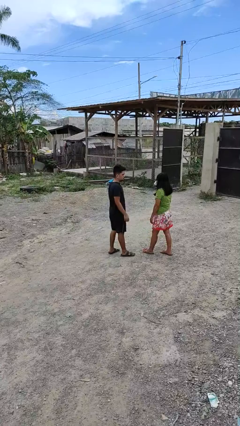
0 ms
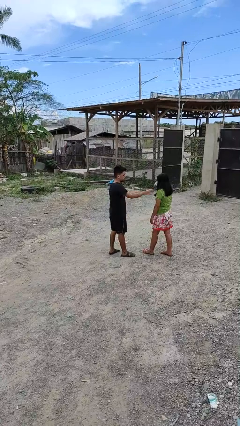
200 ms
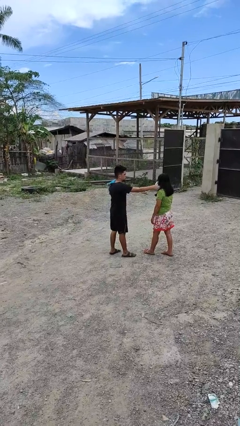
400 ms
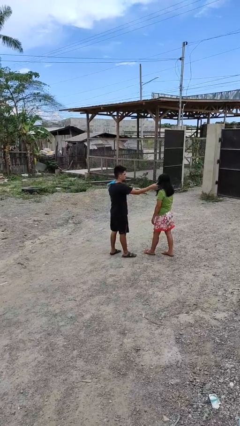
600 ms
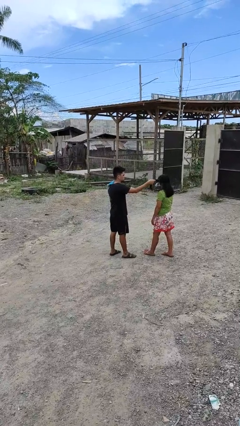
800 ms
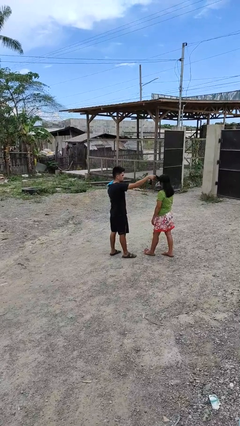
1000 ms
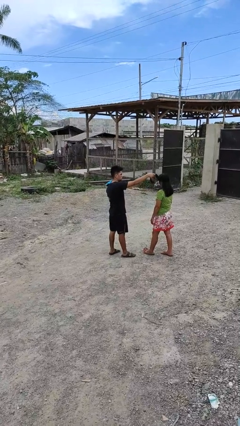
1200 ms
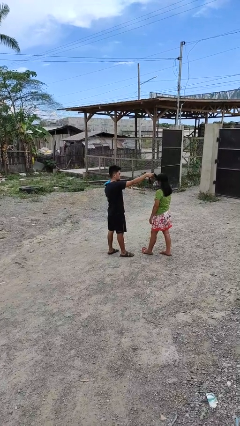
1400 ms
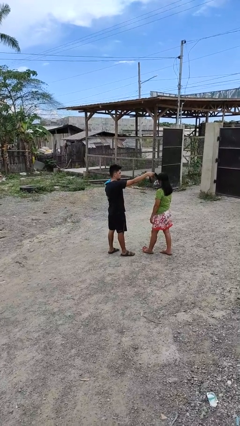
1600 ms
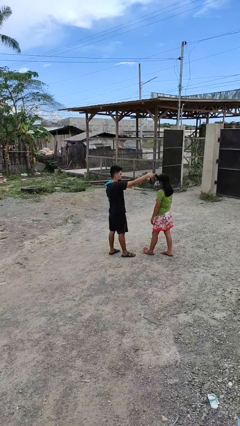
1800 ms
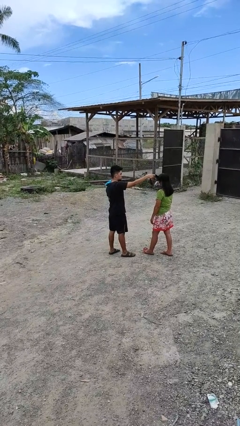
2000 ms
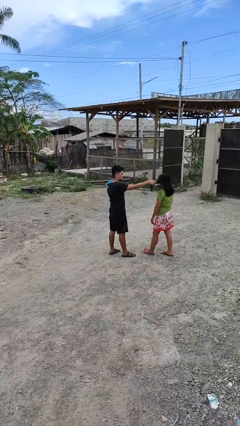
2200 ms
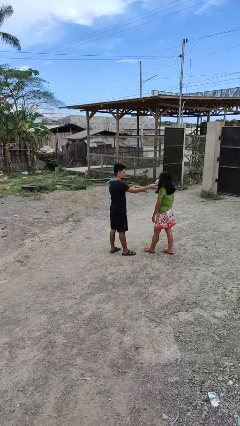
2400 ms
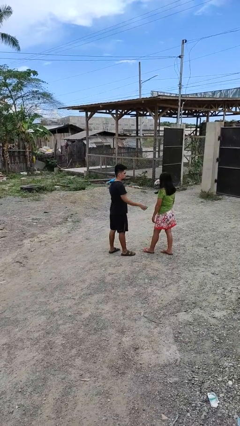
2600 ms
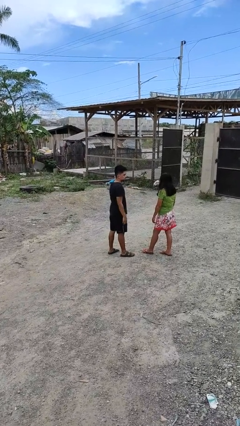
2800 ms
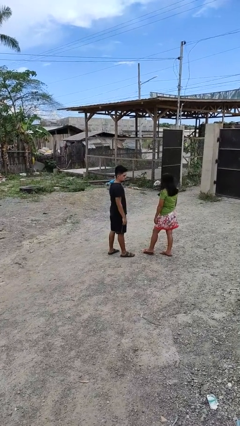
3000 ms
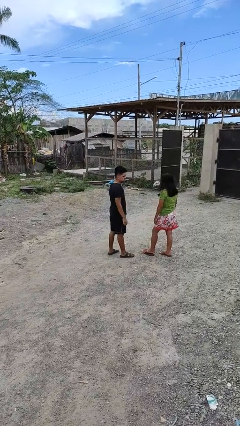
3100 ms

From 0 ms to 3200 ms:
person grabs person by hair

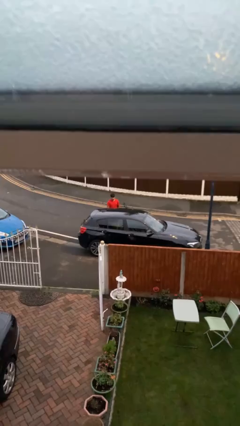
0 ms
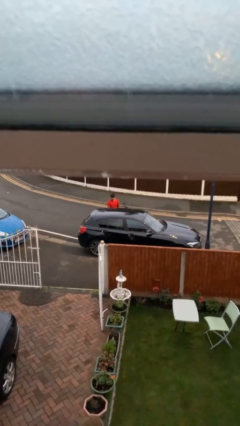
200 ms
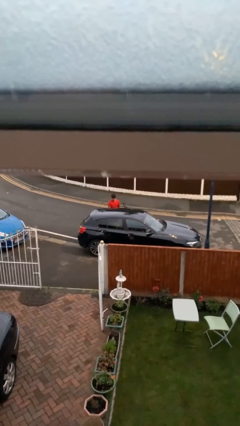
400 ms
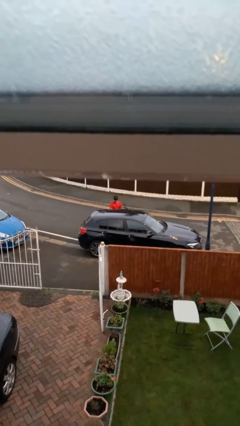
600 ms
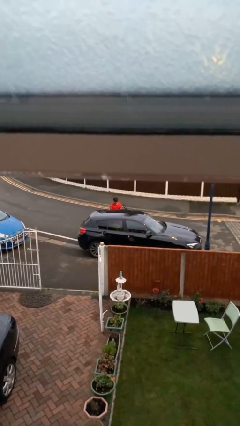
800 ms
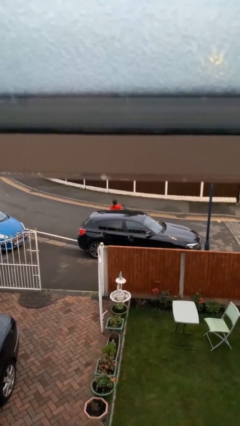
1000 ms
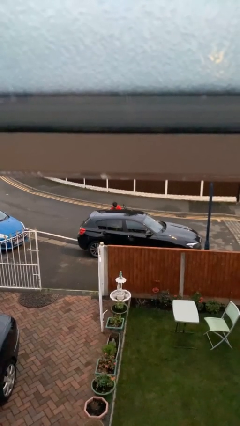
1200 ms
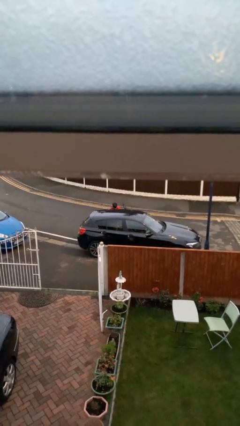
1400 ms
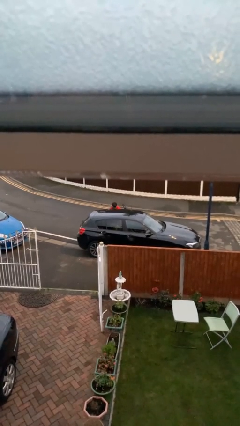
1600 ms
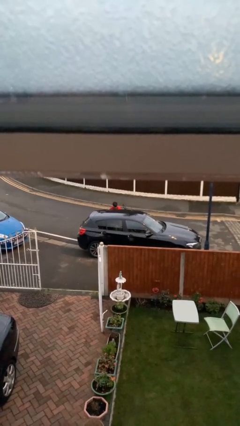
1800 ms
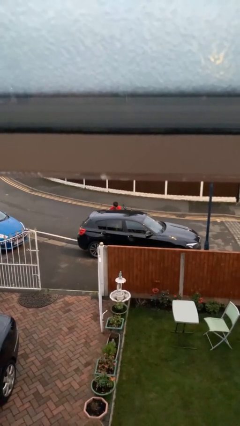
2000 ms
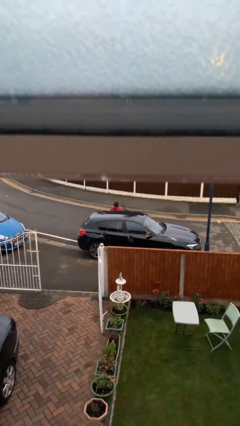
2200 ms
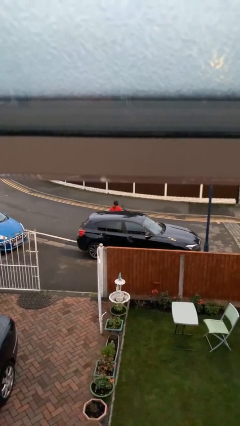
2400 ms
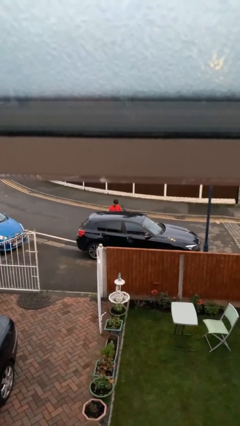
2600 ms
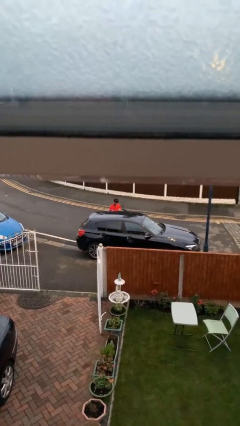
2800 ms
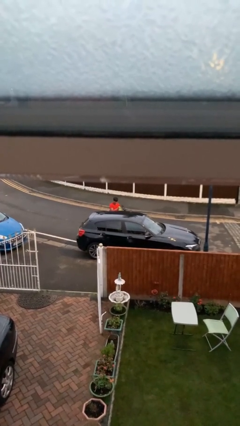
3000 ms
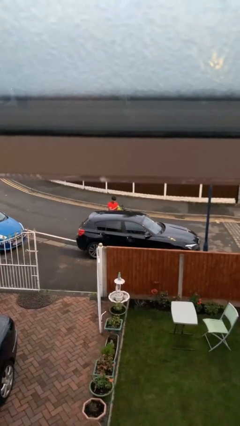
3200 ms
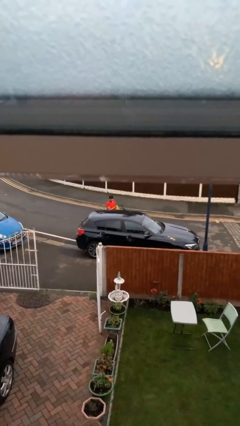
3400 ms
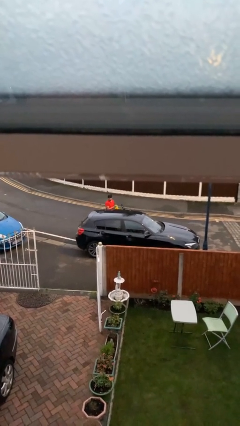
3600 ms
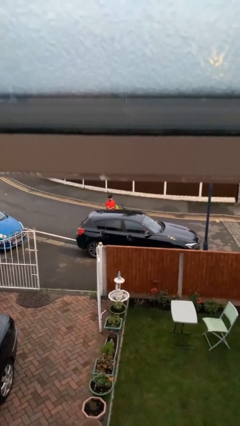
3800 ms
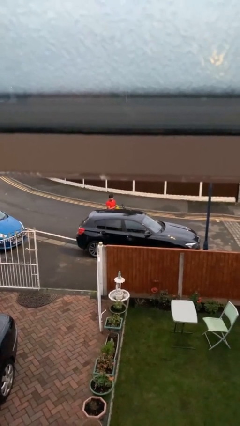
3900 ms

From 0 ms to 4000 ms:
person unloads car

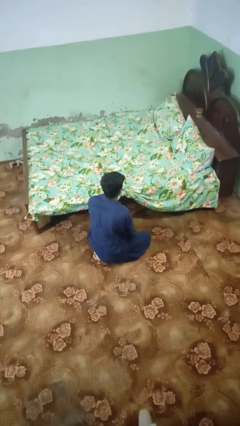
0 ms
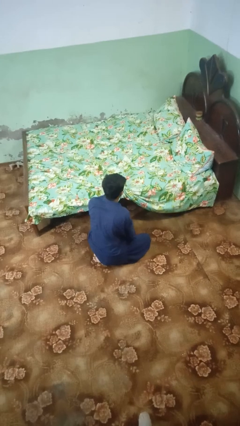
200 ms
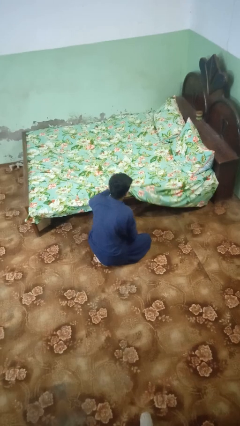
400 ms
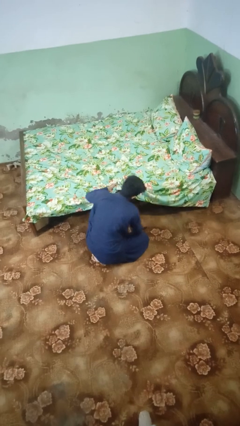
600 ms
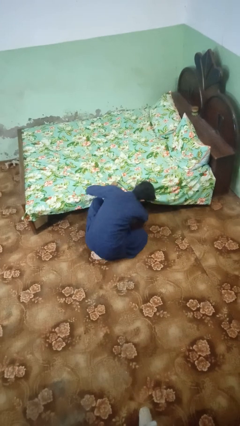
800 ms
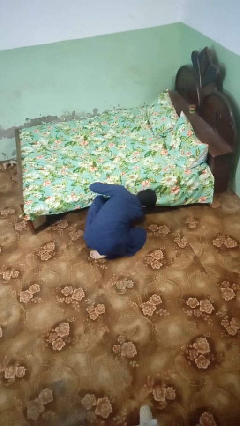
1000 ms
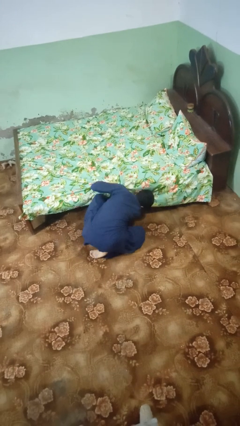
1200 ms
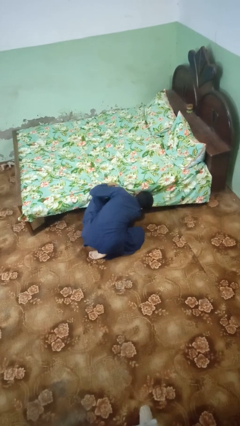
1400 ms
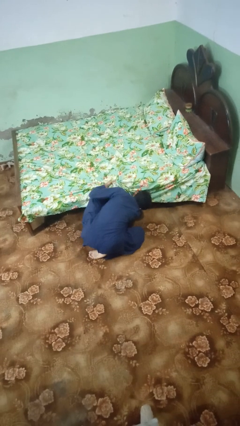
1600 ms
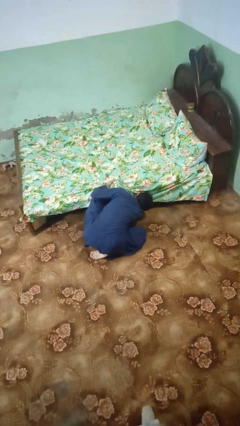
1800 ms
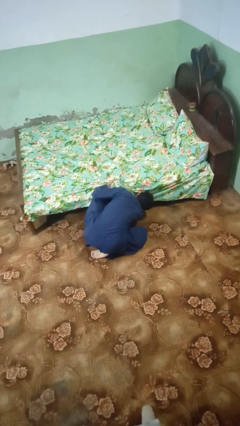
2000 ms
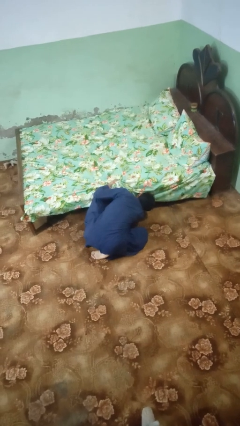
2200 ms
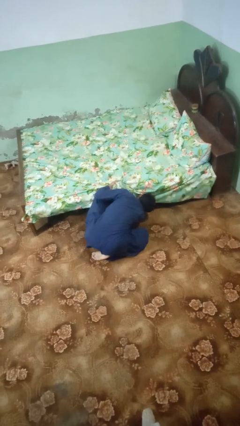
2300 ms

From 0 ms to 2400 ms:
person searches under bed

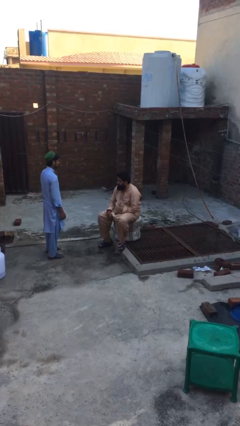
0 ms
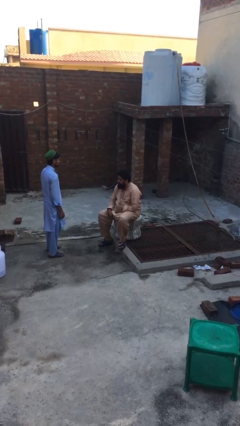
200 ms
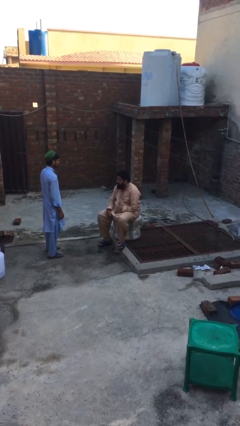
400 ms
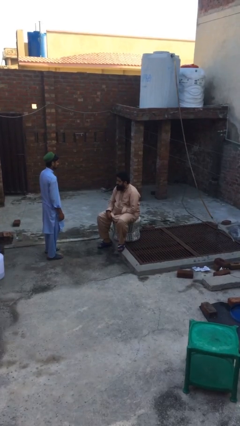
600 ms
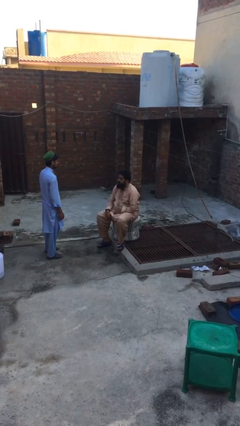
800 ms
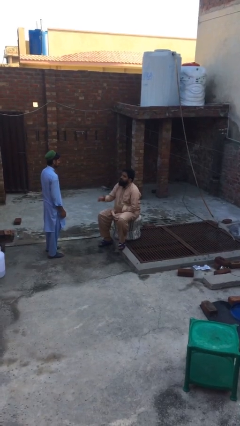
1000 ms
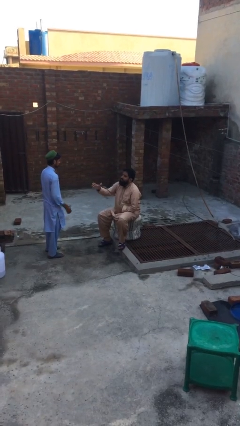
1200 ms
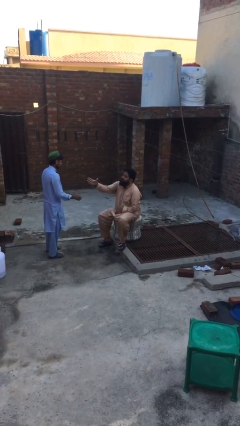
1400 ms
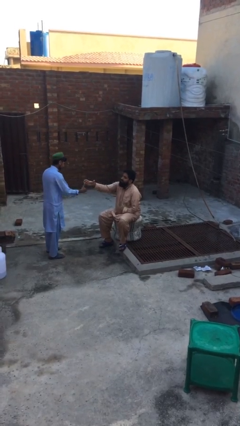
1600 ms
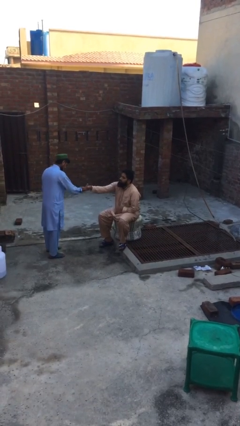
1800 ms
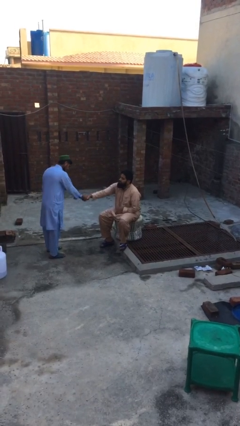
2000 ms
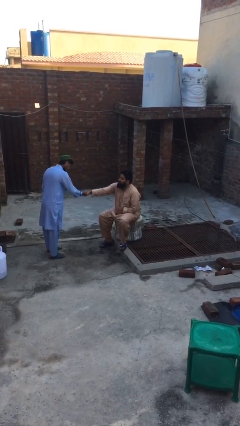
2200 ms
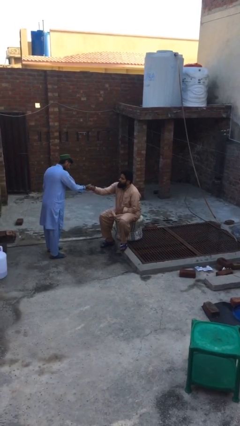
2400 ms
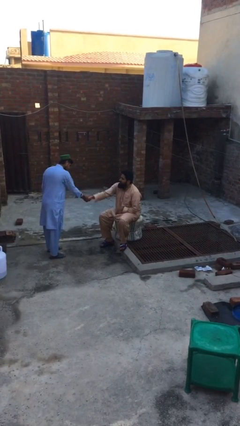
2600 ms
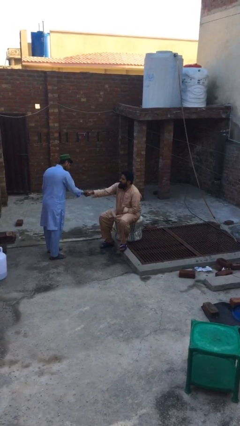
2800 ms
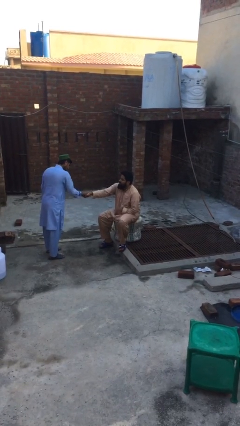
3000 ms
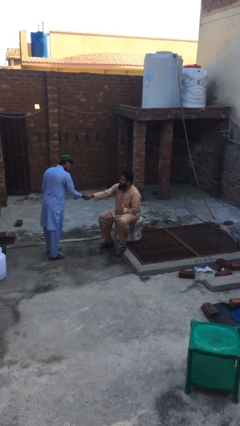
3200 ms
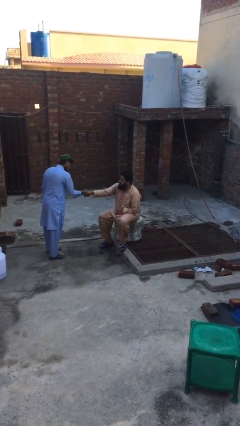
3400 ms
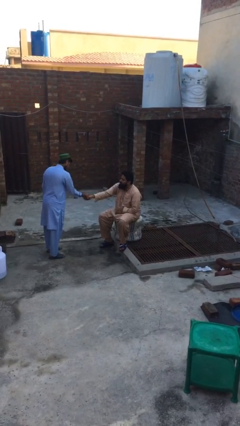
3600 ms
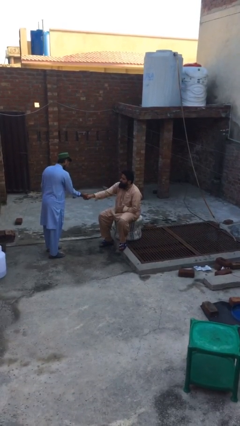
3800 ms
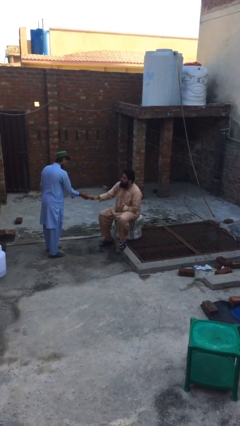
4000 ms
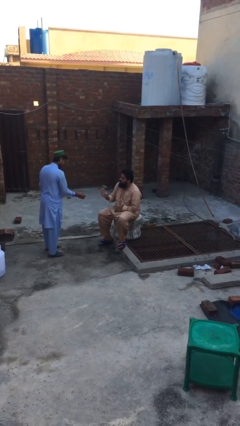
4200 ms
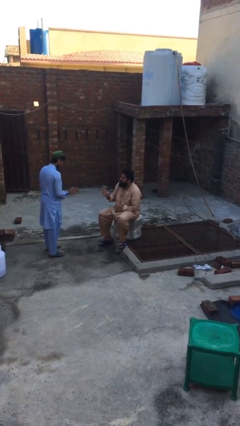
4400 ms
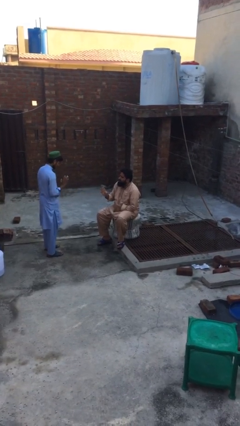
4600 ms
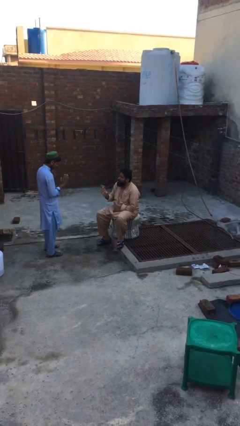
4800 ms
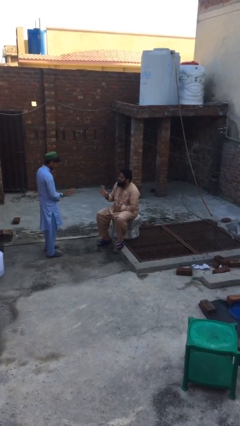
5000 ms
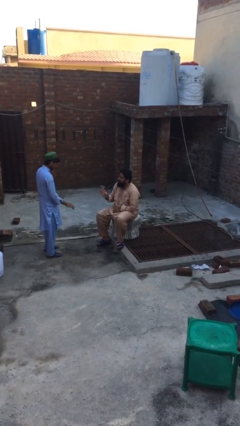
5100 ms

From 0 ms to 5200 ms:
person shakes hand

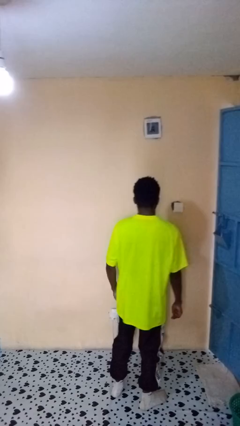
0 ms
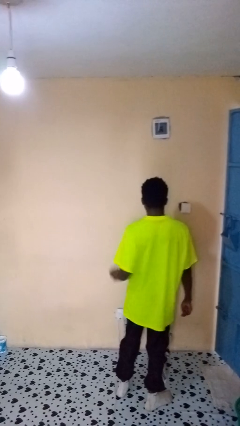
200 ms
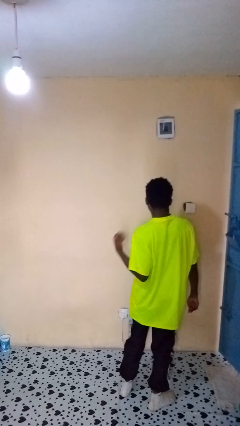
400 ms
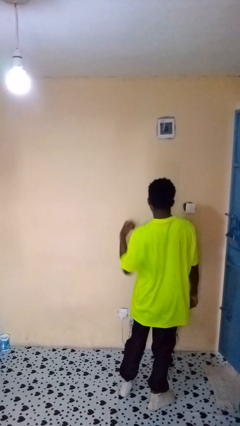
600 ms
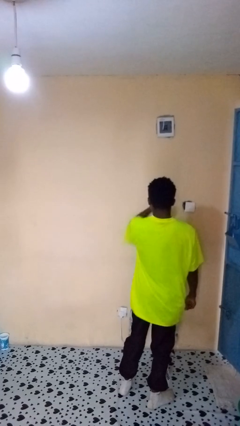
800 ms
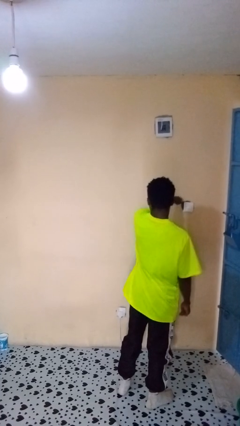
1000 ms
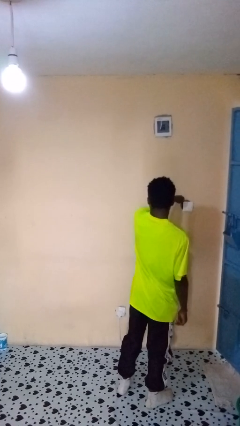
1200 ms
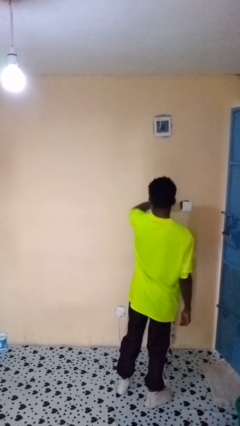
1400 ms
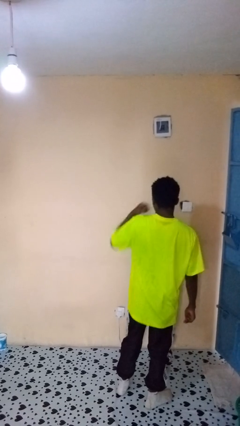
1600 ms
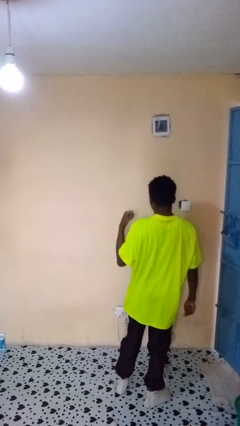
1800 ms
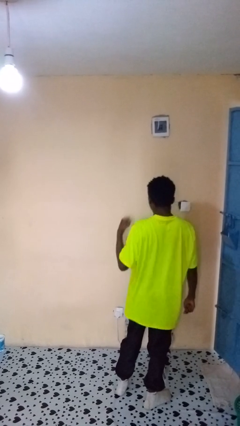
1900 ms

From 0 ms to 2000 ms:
person punches

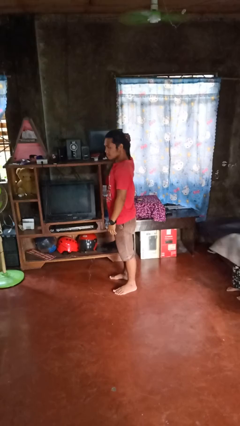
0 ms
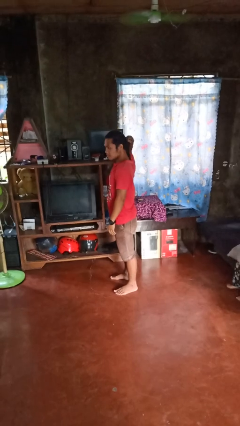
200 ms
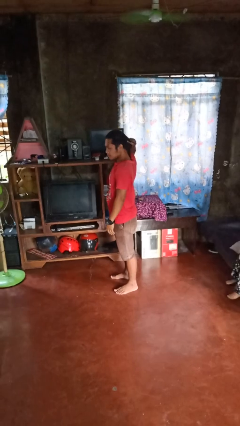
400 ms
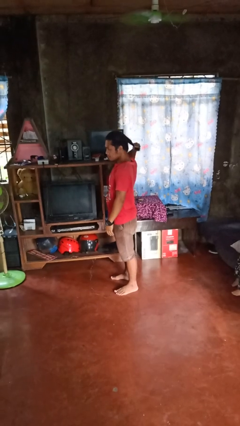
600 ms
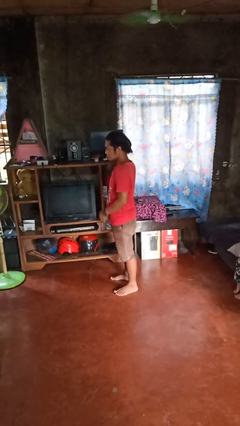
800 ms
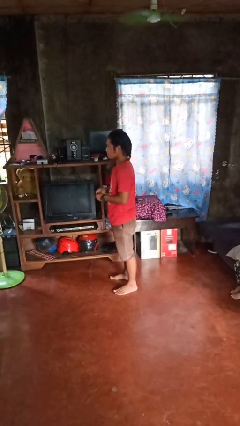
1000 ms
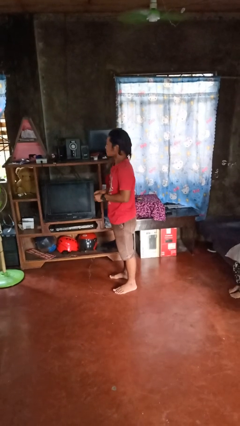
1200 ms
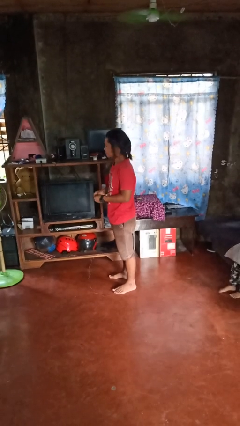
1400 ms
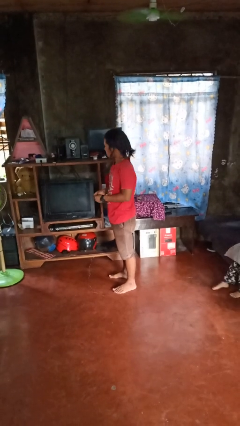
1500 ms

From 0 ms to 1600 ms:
person takes off hairtie
